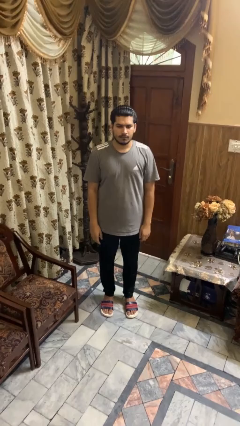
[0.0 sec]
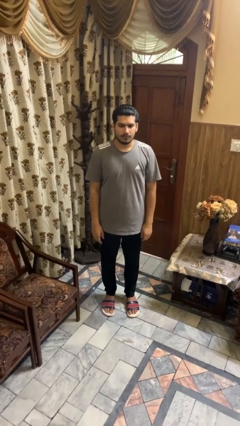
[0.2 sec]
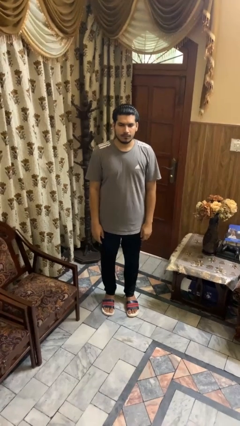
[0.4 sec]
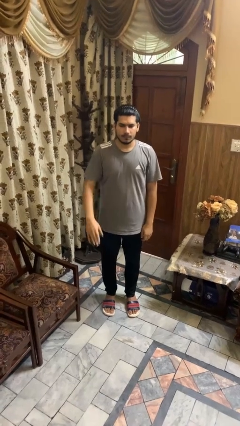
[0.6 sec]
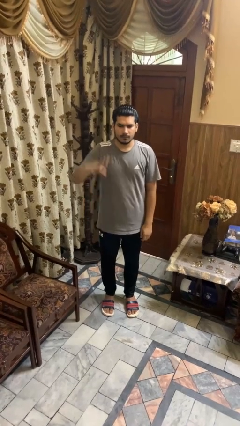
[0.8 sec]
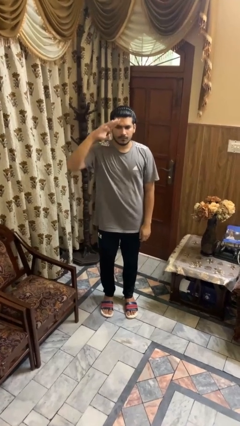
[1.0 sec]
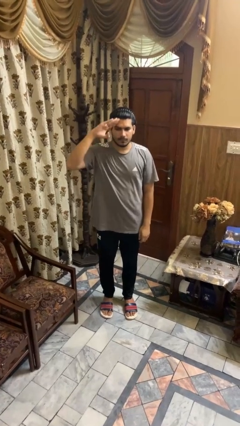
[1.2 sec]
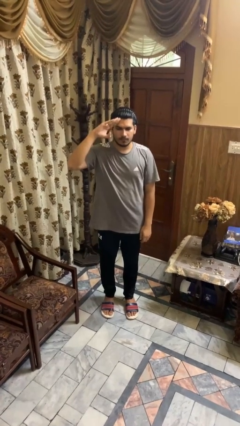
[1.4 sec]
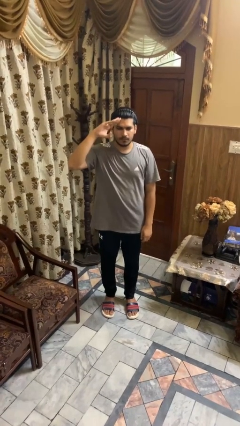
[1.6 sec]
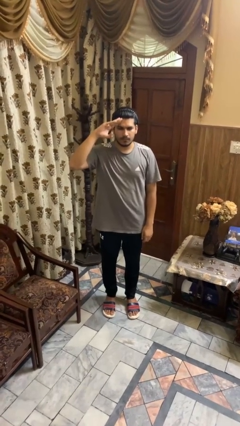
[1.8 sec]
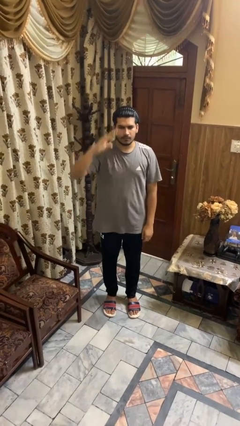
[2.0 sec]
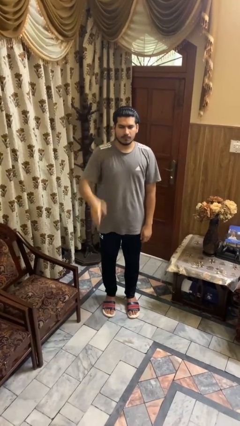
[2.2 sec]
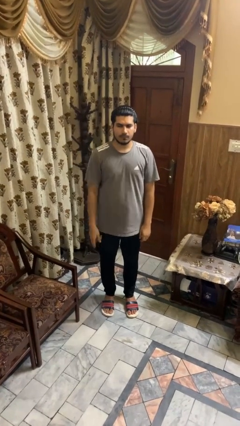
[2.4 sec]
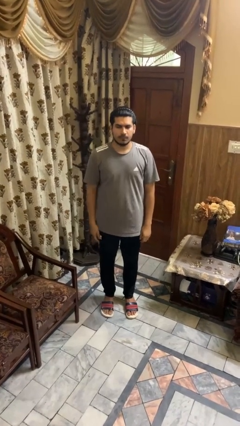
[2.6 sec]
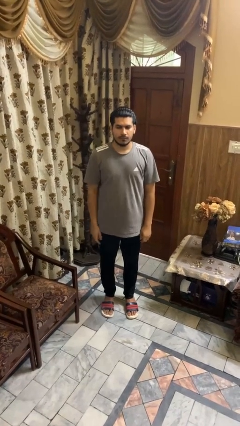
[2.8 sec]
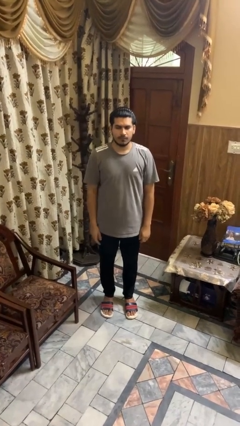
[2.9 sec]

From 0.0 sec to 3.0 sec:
person salutes

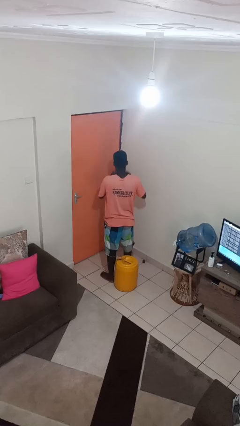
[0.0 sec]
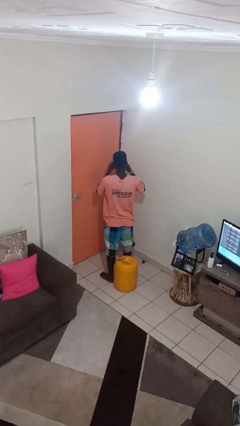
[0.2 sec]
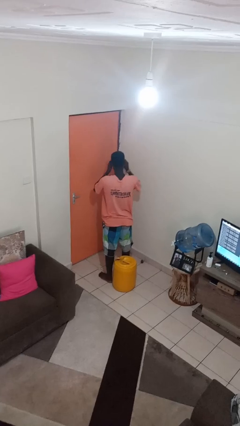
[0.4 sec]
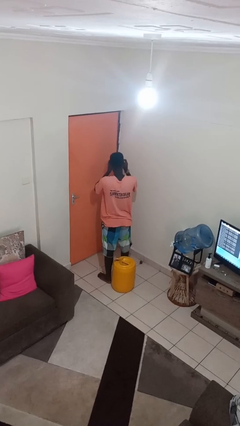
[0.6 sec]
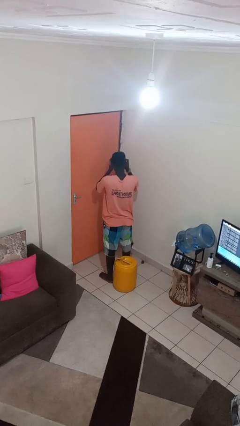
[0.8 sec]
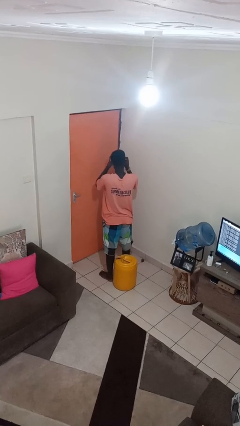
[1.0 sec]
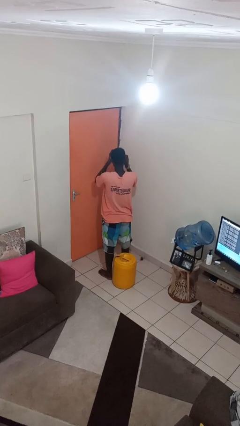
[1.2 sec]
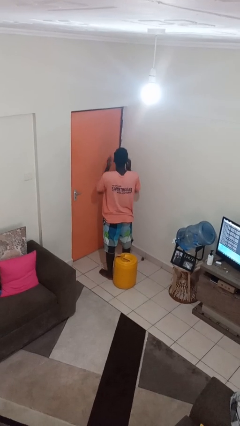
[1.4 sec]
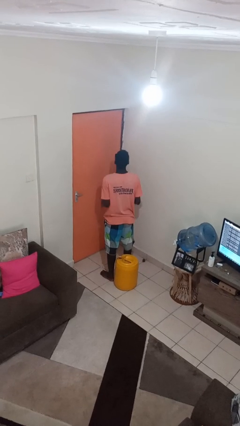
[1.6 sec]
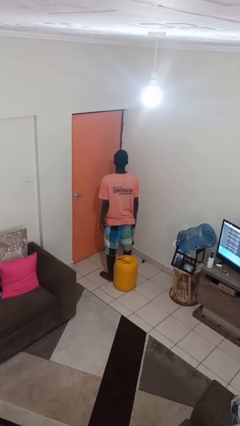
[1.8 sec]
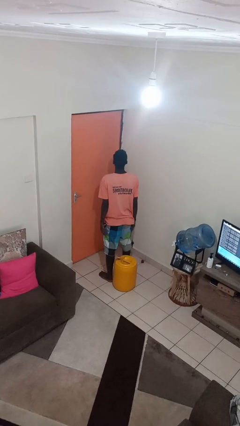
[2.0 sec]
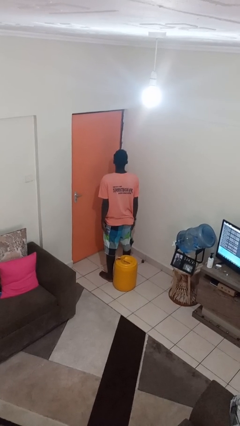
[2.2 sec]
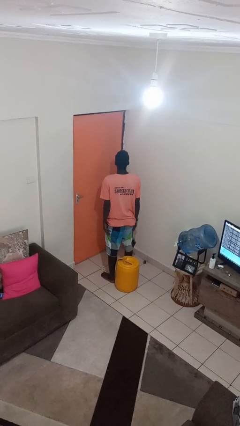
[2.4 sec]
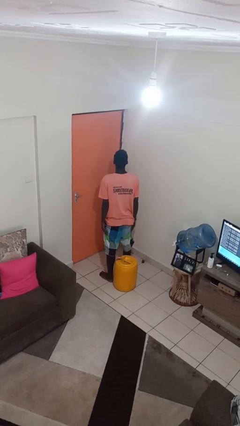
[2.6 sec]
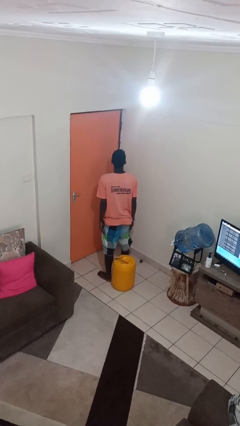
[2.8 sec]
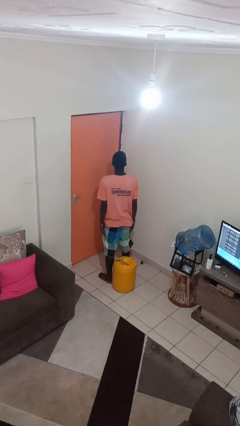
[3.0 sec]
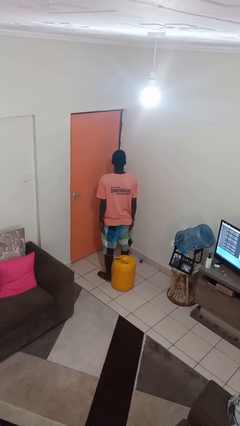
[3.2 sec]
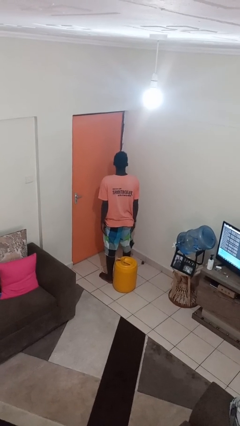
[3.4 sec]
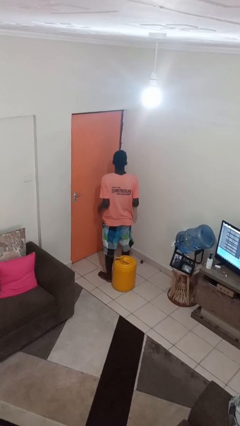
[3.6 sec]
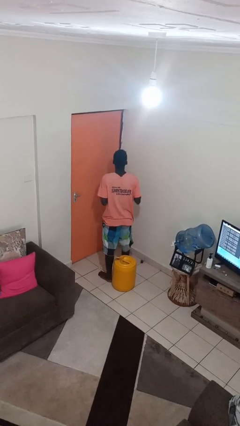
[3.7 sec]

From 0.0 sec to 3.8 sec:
person puts on sunglasses

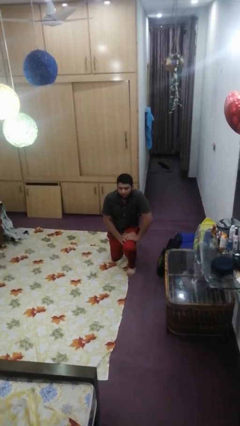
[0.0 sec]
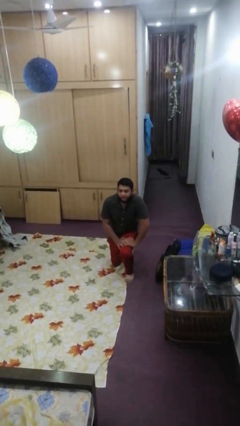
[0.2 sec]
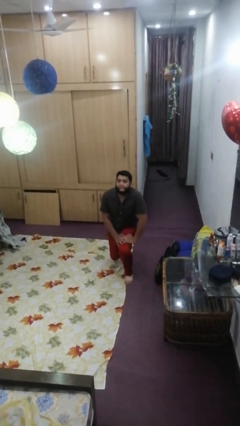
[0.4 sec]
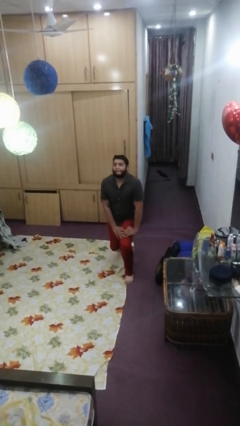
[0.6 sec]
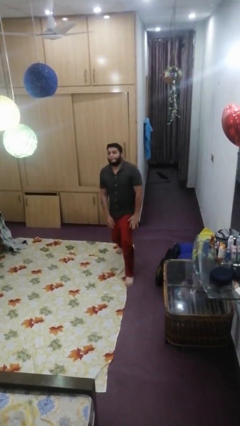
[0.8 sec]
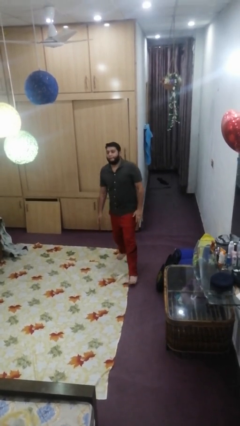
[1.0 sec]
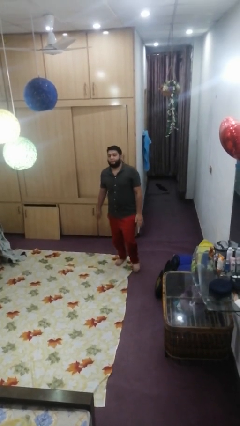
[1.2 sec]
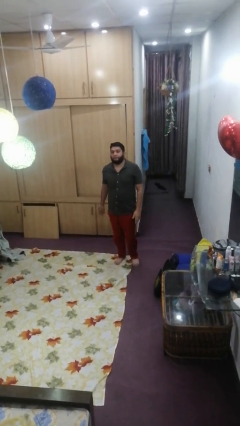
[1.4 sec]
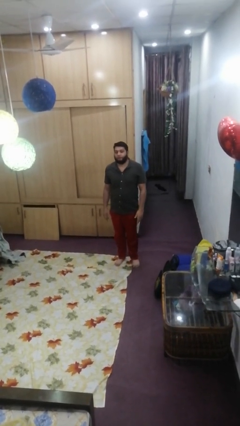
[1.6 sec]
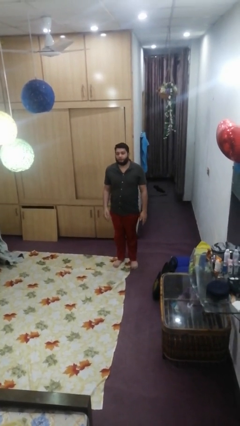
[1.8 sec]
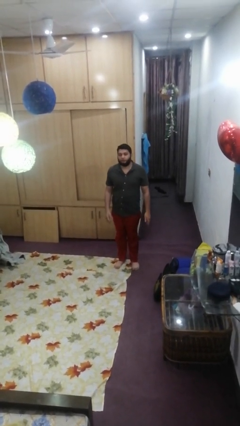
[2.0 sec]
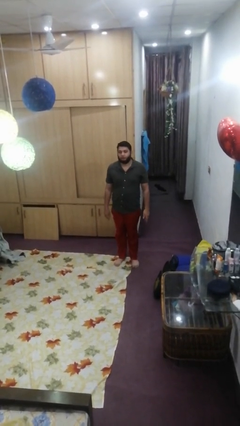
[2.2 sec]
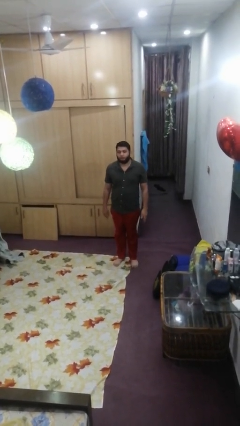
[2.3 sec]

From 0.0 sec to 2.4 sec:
person stands up from floor

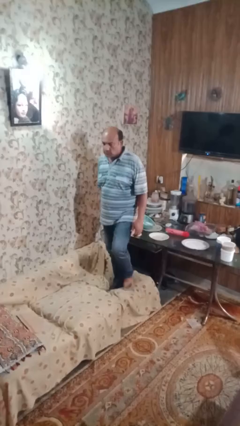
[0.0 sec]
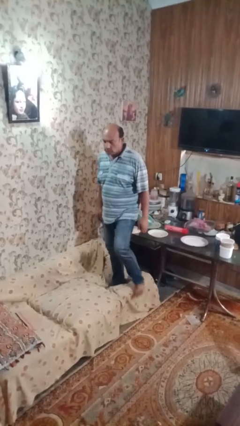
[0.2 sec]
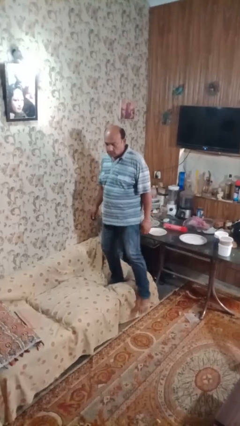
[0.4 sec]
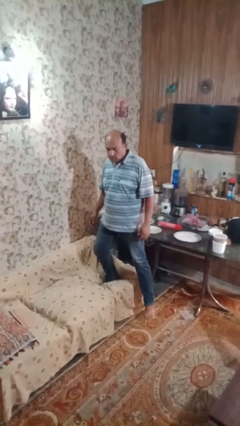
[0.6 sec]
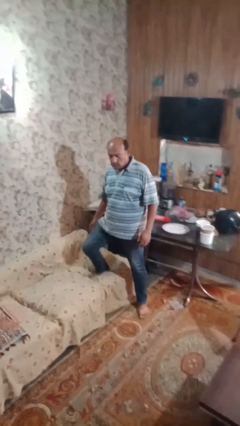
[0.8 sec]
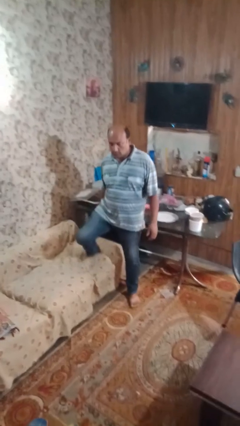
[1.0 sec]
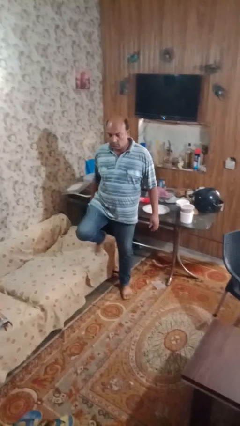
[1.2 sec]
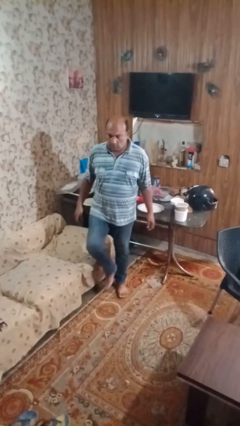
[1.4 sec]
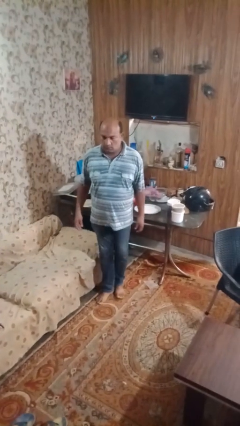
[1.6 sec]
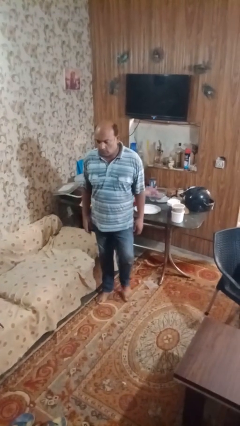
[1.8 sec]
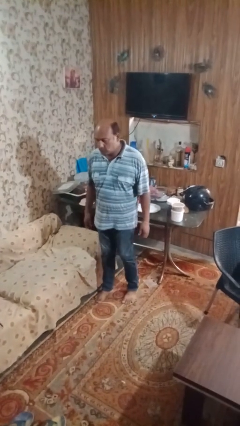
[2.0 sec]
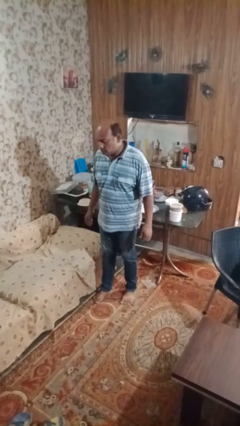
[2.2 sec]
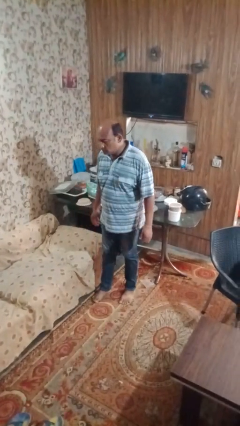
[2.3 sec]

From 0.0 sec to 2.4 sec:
person climbs off couch

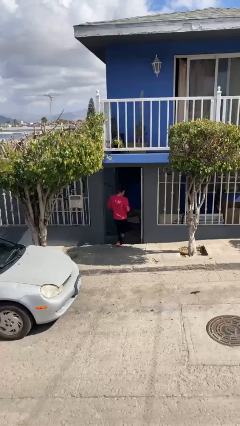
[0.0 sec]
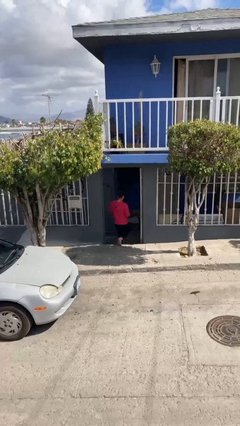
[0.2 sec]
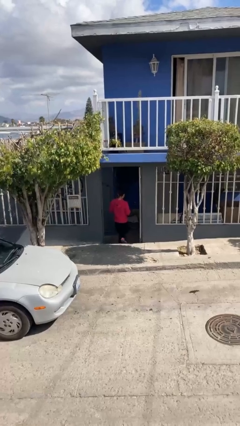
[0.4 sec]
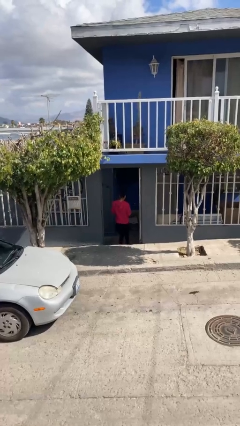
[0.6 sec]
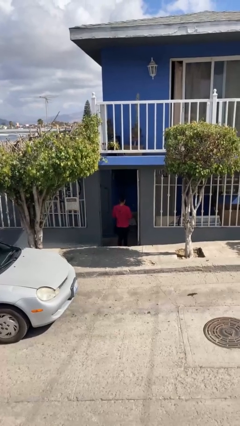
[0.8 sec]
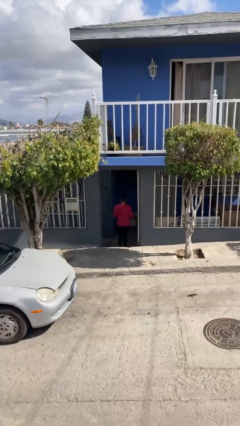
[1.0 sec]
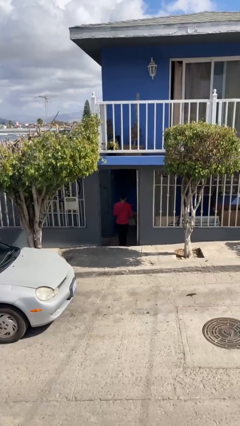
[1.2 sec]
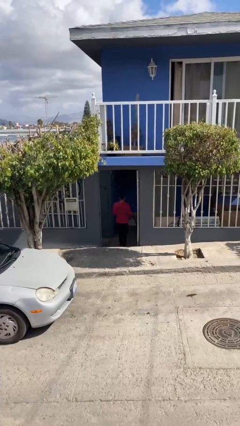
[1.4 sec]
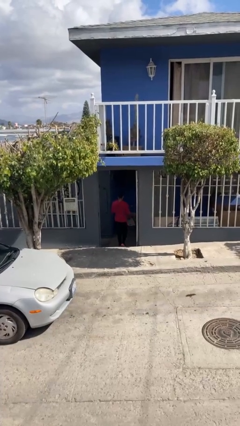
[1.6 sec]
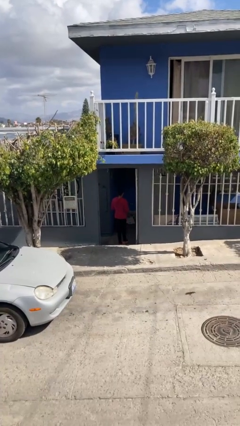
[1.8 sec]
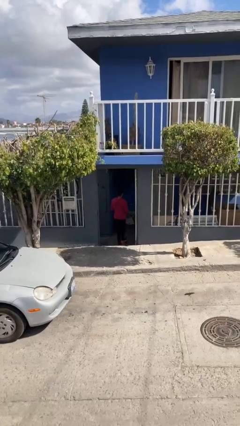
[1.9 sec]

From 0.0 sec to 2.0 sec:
person exits scene through structure

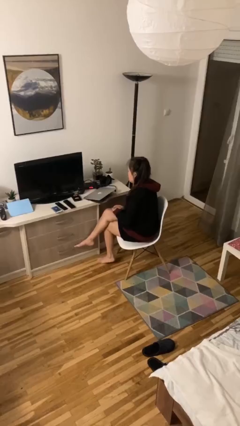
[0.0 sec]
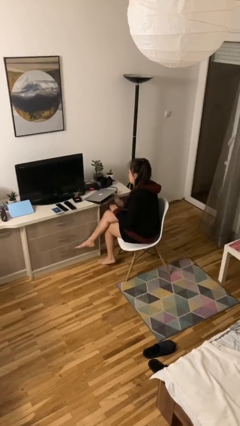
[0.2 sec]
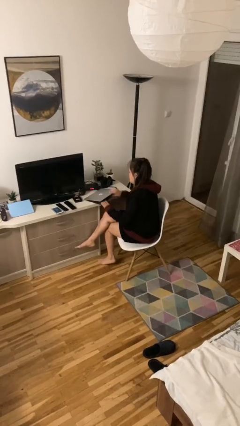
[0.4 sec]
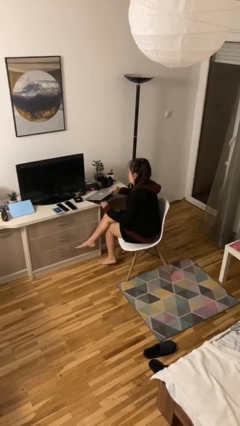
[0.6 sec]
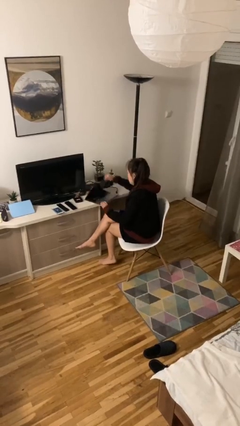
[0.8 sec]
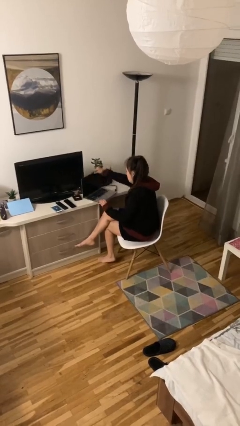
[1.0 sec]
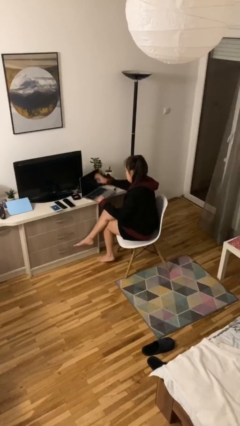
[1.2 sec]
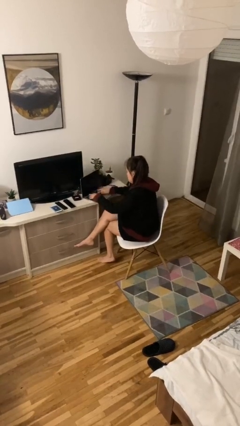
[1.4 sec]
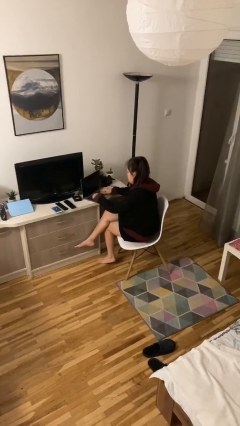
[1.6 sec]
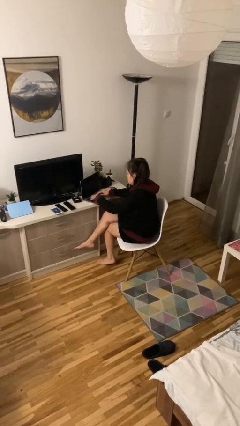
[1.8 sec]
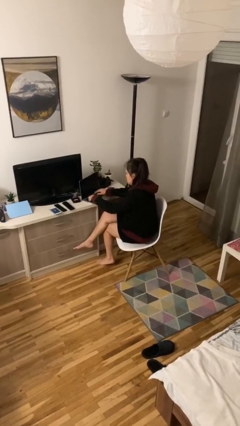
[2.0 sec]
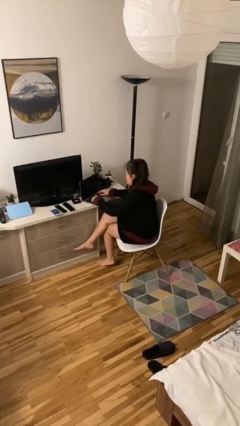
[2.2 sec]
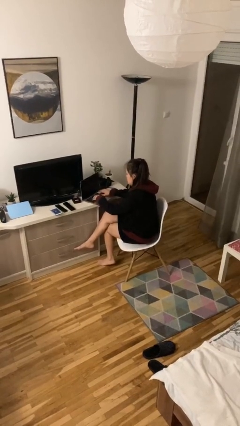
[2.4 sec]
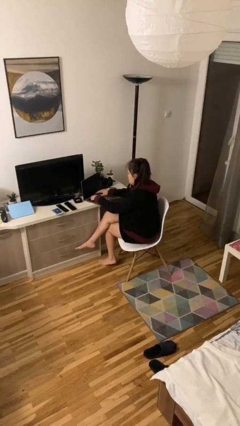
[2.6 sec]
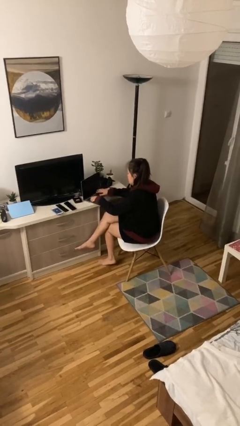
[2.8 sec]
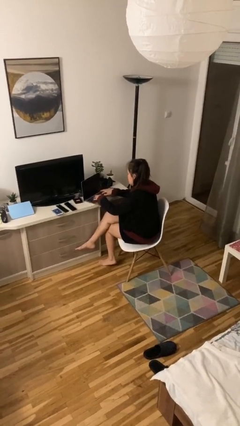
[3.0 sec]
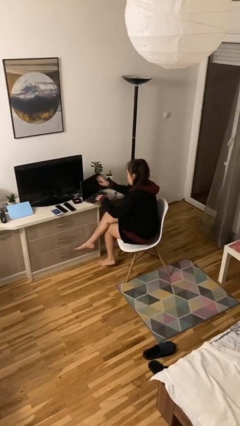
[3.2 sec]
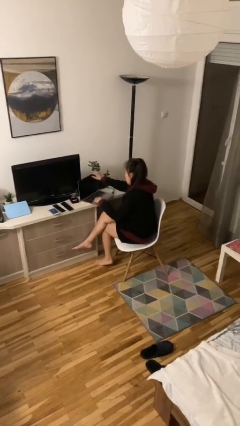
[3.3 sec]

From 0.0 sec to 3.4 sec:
person interacts with laptop
